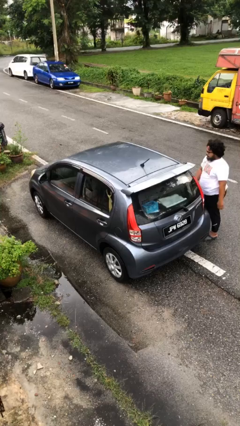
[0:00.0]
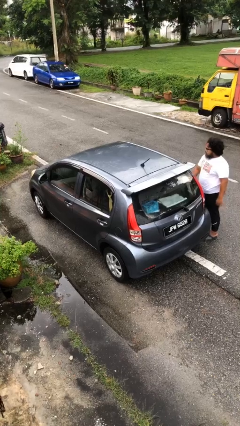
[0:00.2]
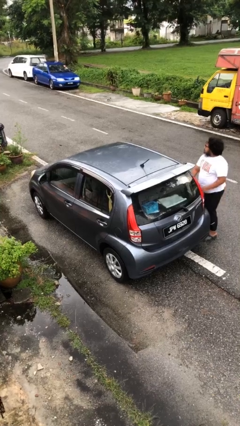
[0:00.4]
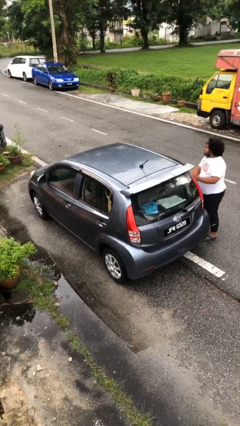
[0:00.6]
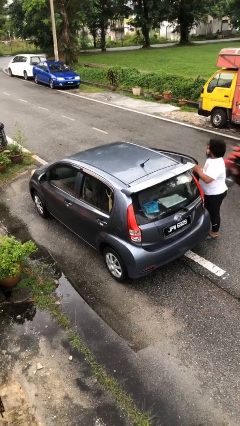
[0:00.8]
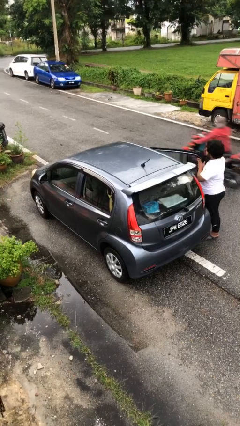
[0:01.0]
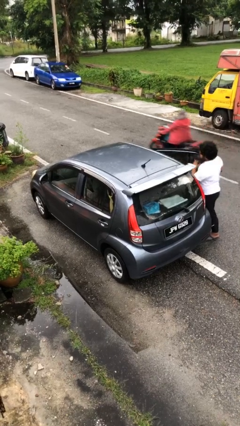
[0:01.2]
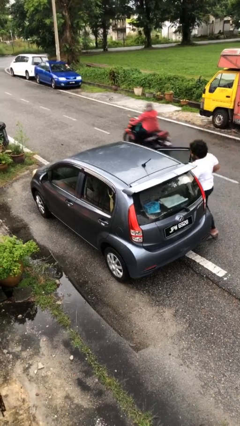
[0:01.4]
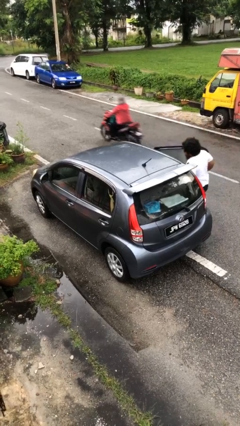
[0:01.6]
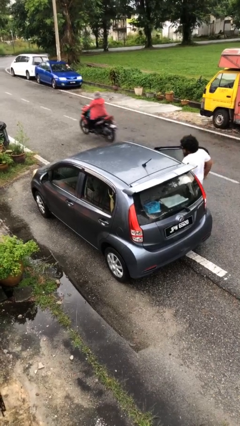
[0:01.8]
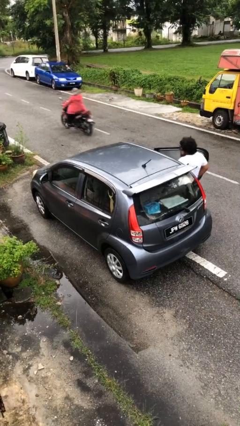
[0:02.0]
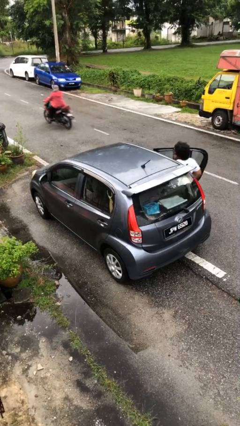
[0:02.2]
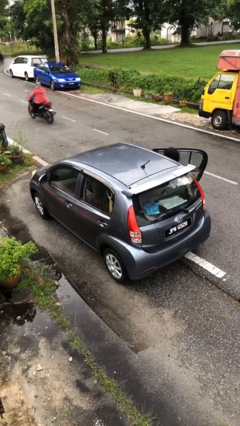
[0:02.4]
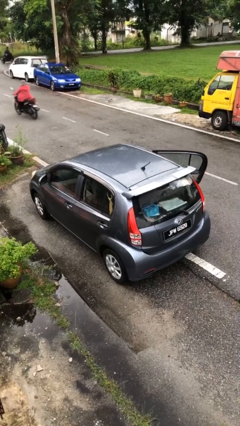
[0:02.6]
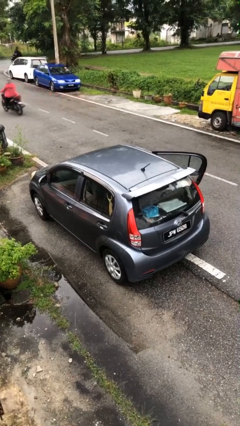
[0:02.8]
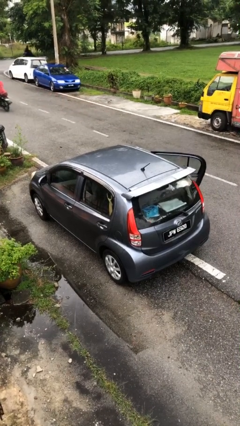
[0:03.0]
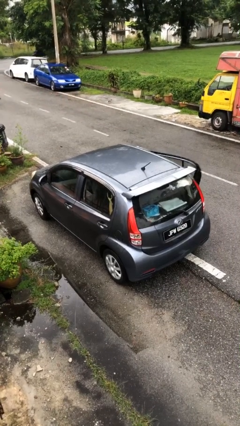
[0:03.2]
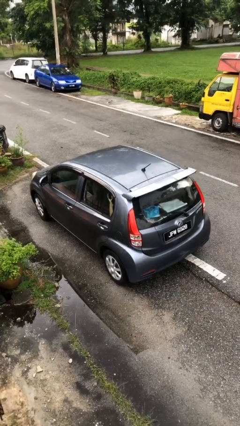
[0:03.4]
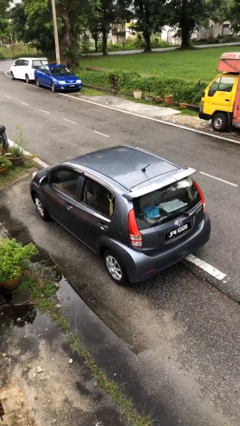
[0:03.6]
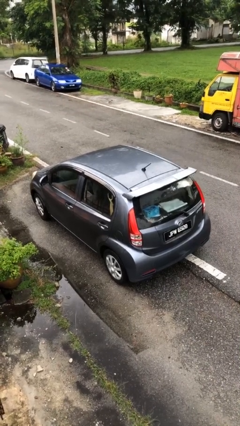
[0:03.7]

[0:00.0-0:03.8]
car picks up person

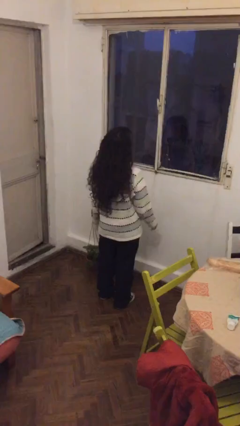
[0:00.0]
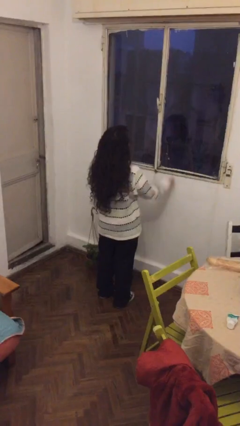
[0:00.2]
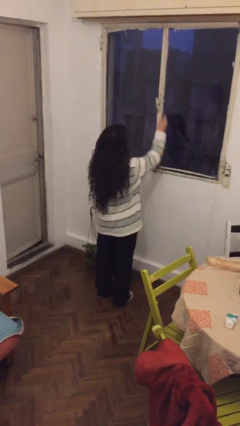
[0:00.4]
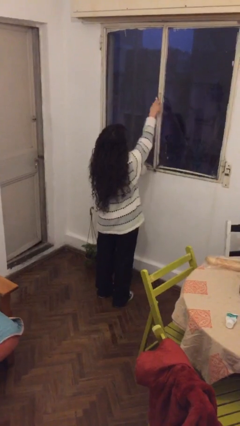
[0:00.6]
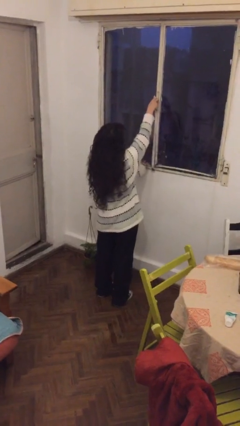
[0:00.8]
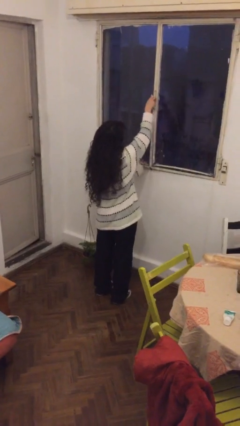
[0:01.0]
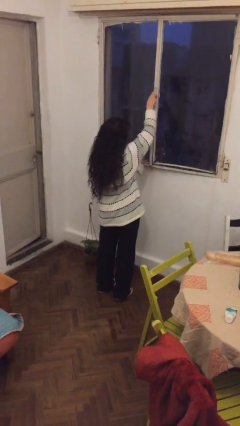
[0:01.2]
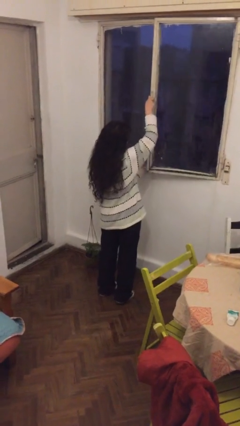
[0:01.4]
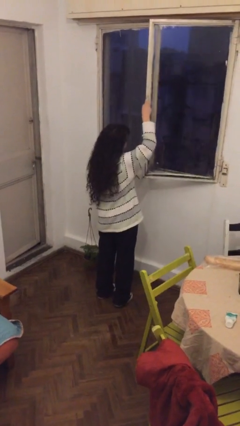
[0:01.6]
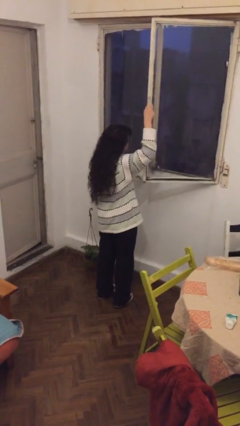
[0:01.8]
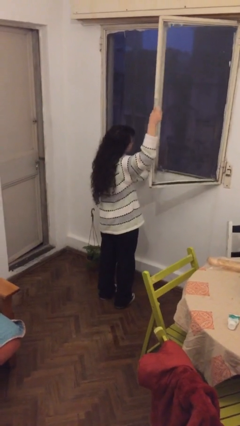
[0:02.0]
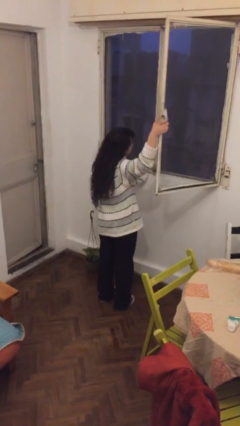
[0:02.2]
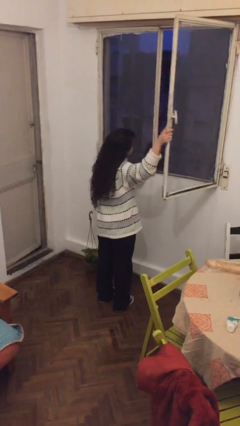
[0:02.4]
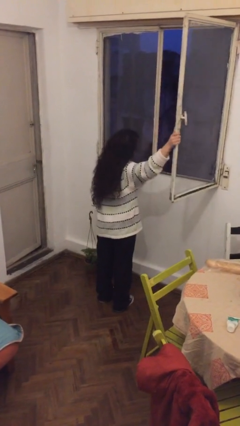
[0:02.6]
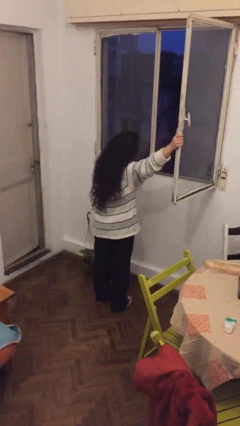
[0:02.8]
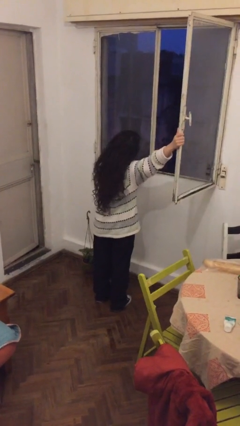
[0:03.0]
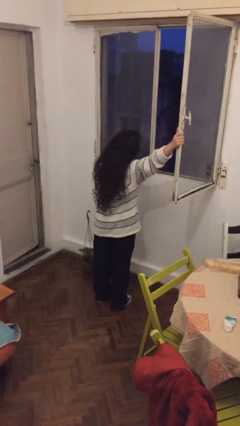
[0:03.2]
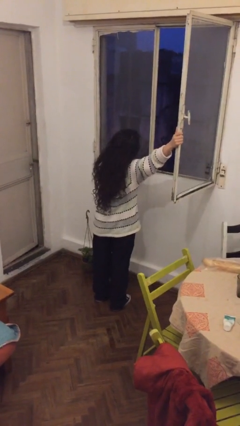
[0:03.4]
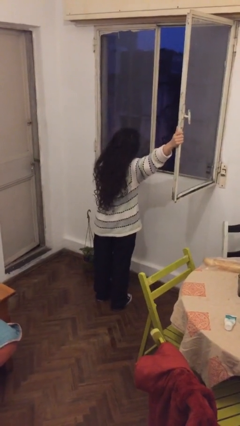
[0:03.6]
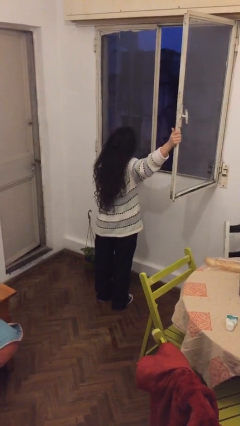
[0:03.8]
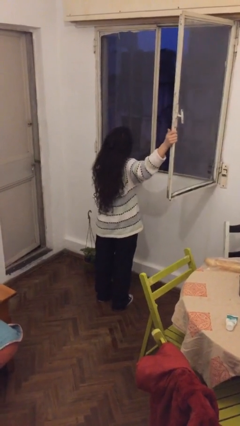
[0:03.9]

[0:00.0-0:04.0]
person opens home window

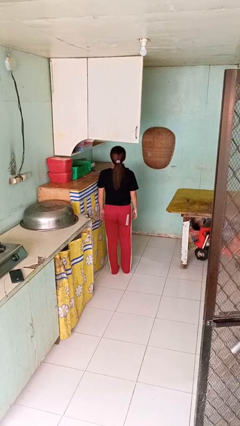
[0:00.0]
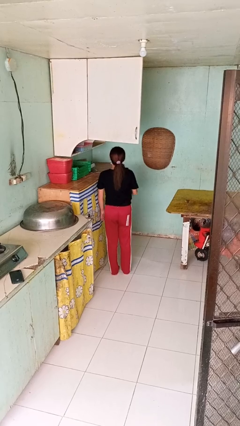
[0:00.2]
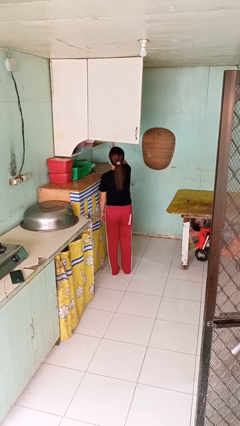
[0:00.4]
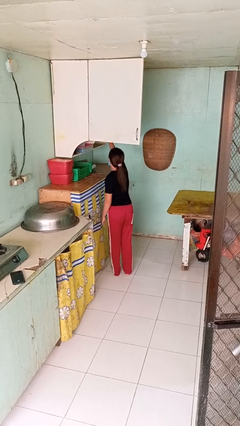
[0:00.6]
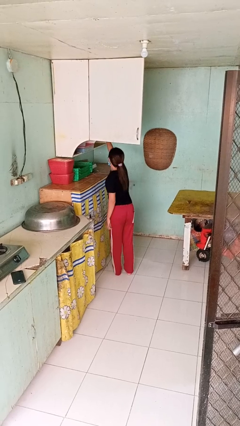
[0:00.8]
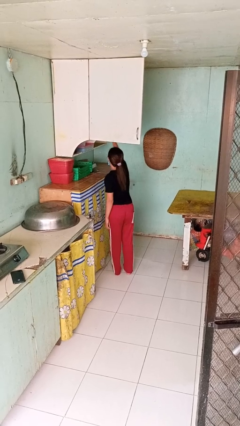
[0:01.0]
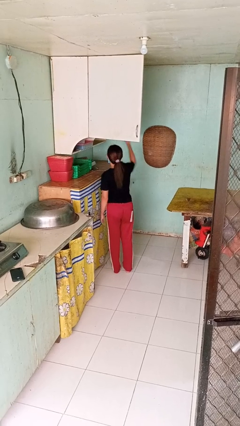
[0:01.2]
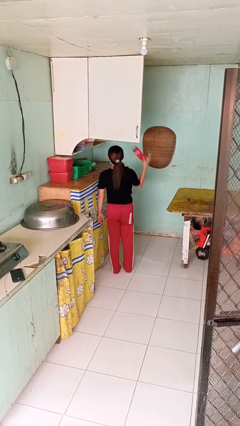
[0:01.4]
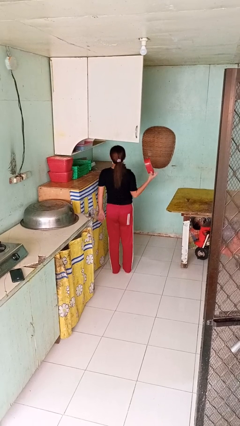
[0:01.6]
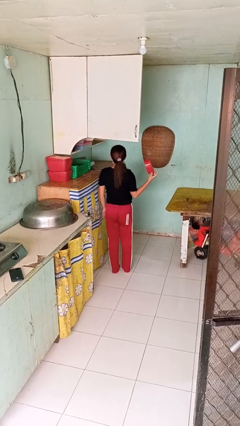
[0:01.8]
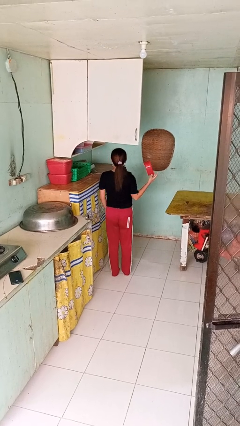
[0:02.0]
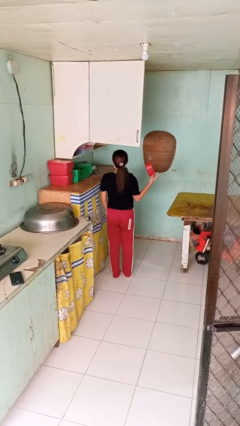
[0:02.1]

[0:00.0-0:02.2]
person takes object from cabinet

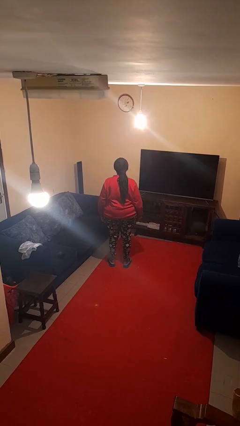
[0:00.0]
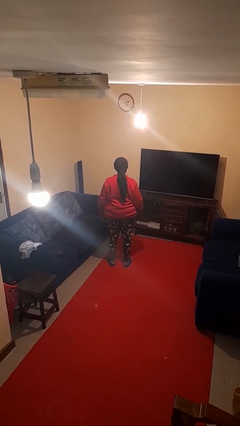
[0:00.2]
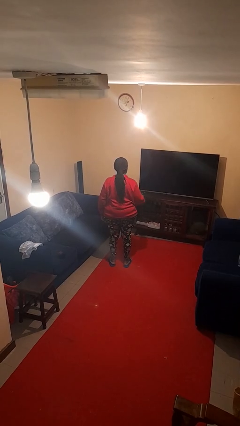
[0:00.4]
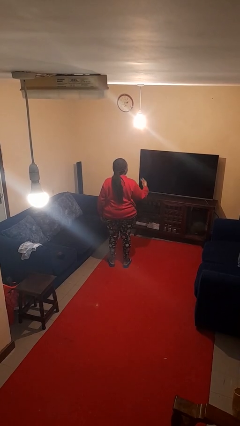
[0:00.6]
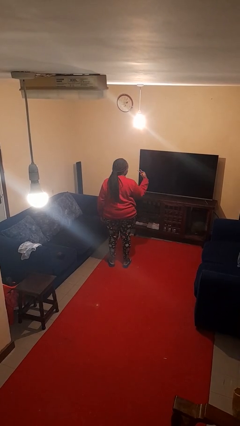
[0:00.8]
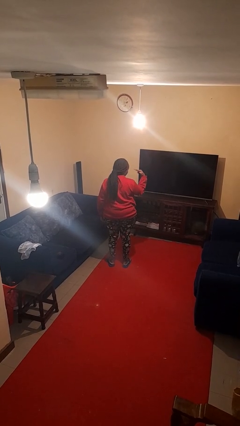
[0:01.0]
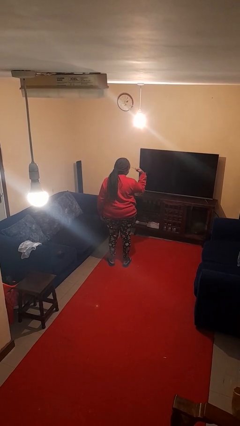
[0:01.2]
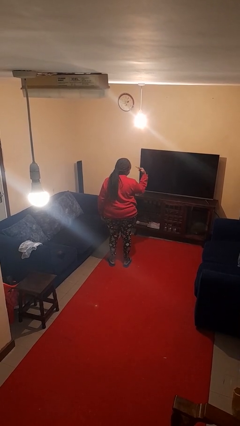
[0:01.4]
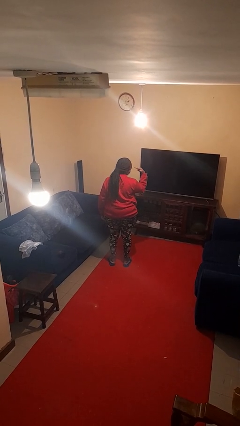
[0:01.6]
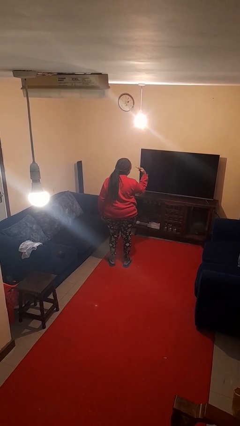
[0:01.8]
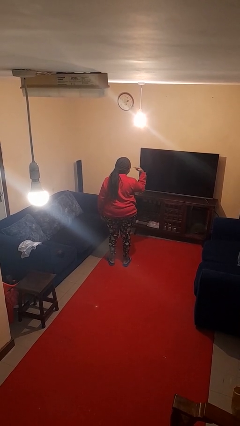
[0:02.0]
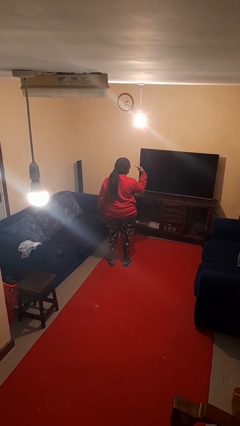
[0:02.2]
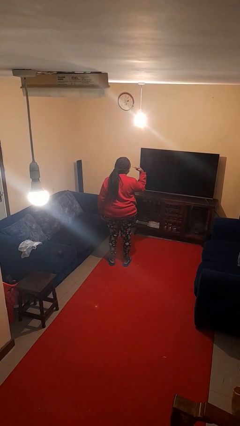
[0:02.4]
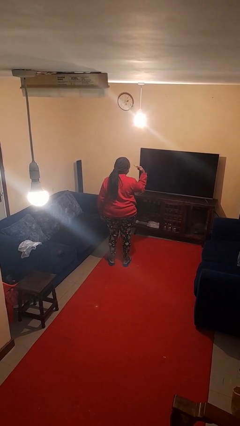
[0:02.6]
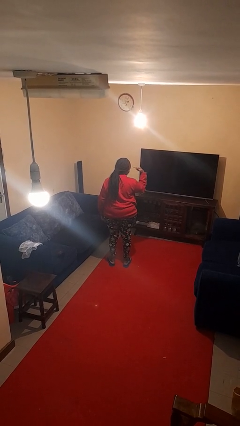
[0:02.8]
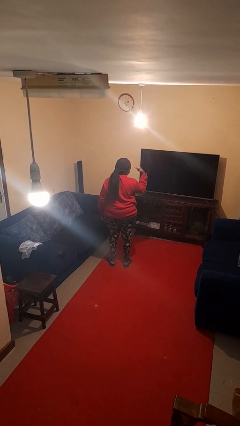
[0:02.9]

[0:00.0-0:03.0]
person gestures watch closely

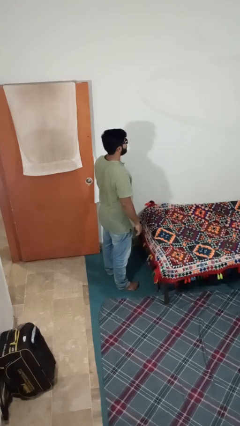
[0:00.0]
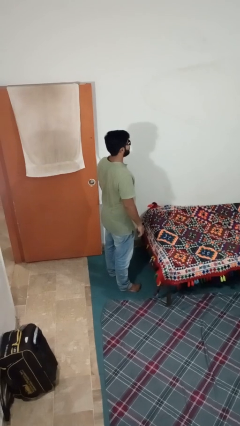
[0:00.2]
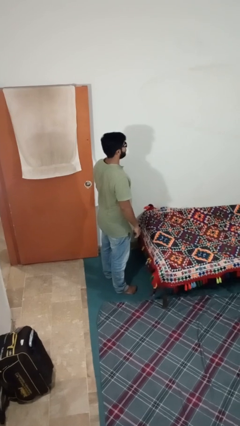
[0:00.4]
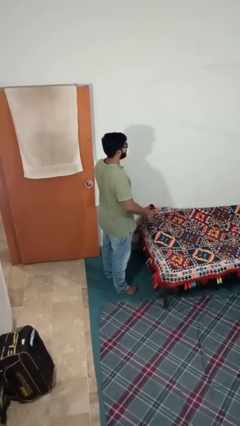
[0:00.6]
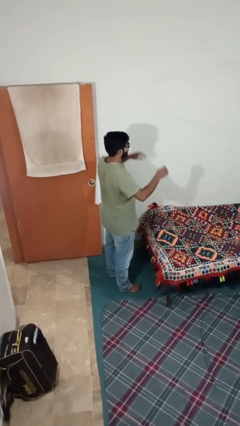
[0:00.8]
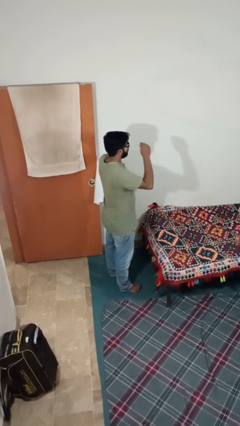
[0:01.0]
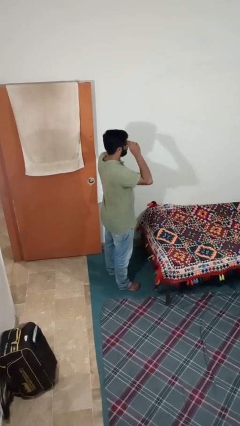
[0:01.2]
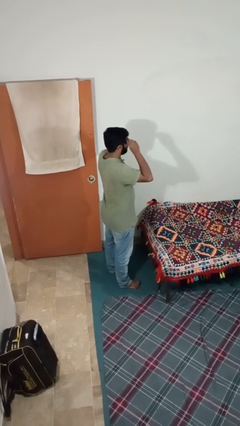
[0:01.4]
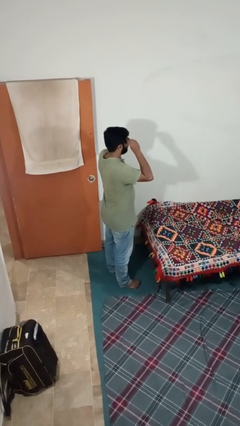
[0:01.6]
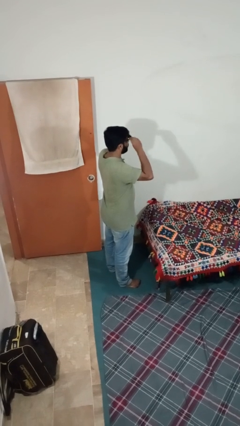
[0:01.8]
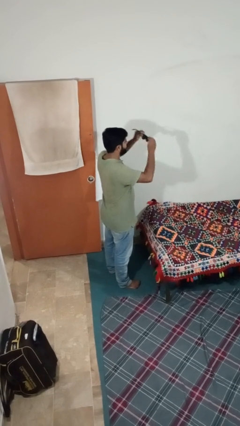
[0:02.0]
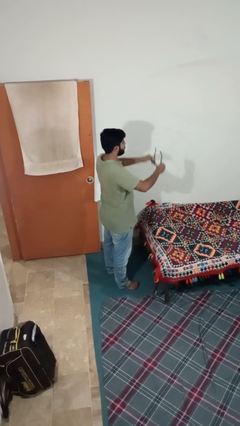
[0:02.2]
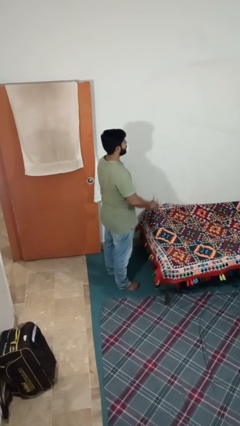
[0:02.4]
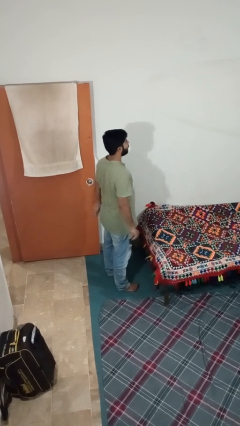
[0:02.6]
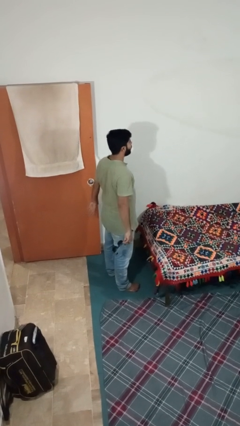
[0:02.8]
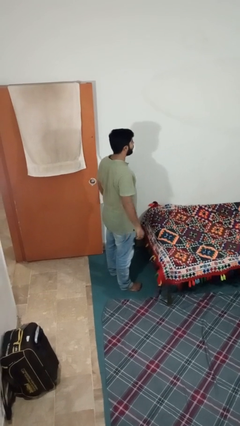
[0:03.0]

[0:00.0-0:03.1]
person takes off sunglasses

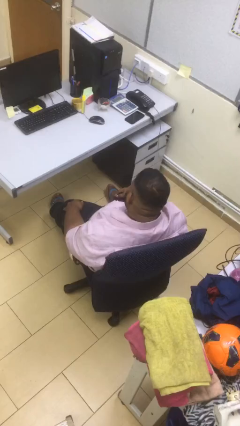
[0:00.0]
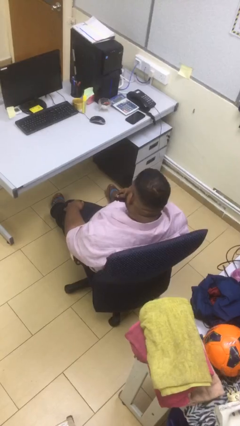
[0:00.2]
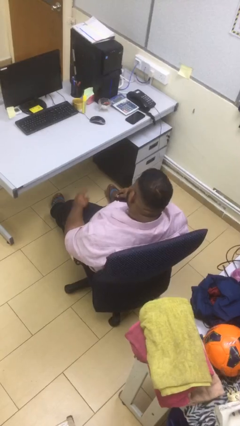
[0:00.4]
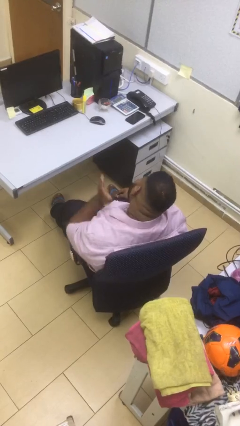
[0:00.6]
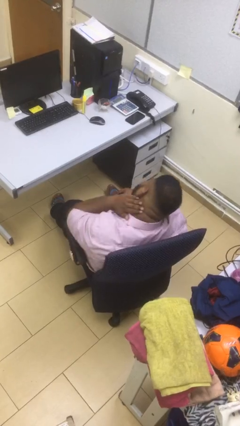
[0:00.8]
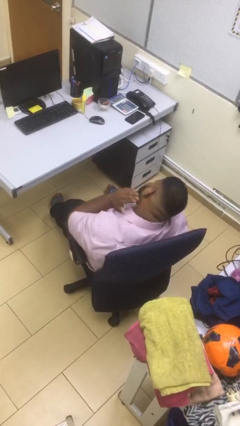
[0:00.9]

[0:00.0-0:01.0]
person swats bug

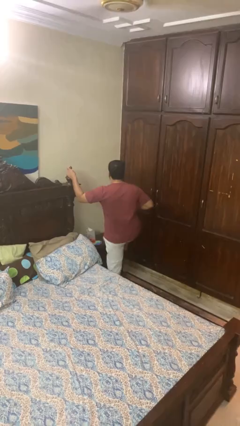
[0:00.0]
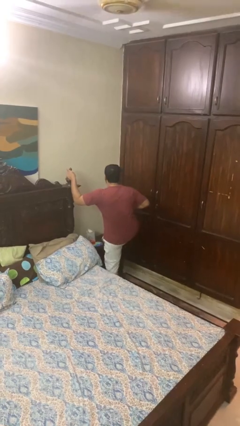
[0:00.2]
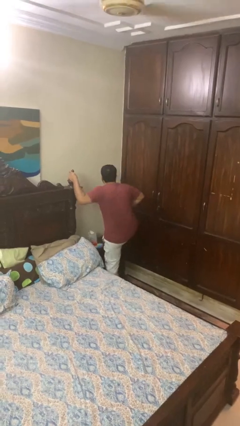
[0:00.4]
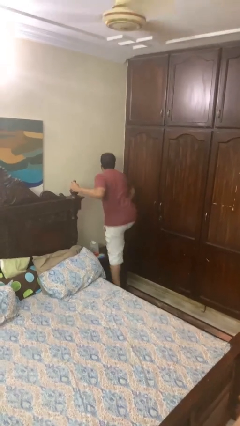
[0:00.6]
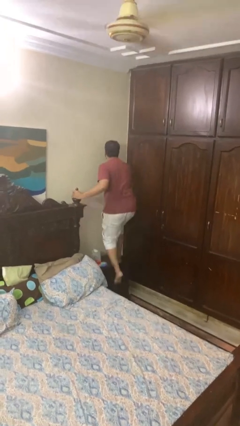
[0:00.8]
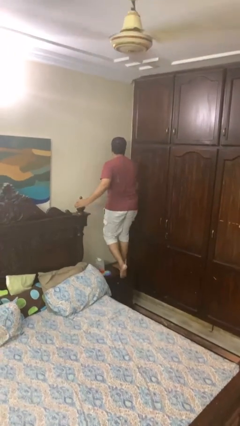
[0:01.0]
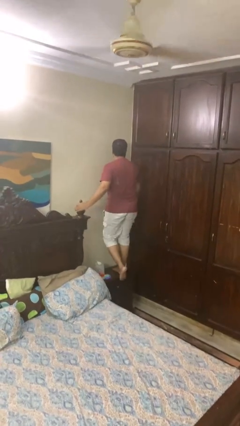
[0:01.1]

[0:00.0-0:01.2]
person climbs on table
